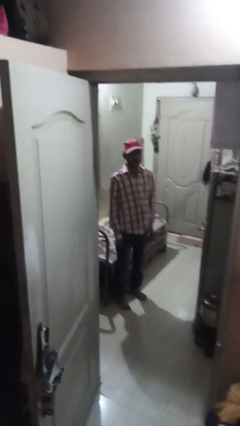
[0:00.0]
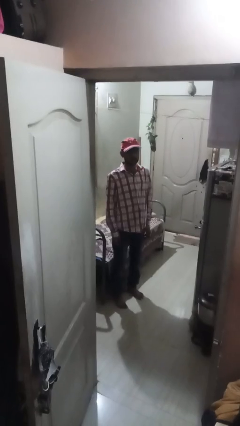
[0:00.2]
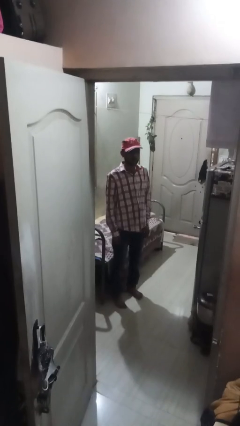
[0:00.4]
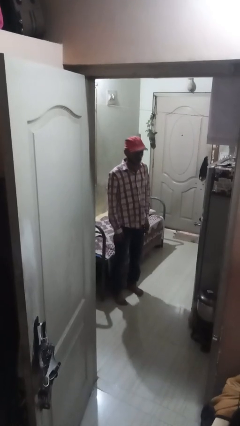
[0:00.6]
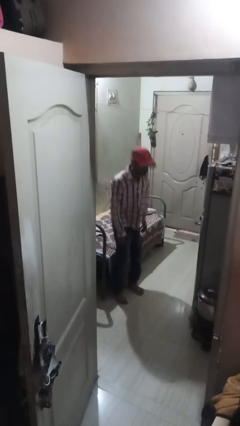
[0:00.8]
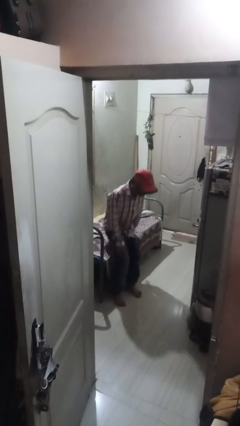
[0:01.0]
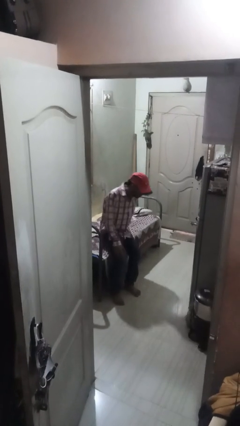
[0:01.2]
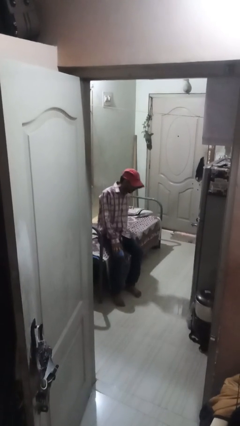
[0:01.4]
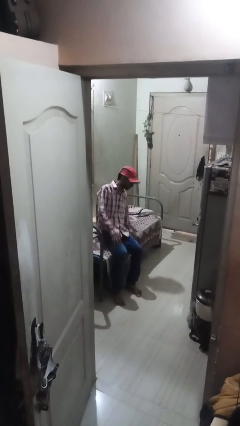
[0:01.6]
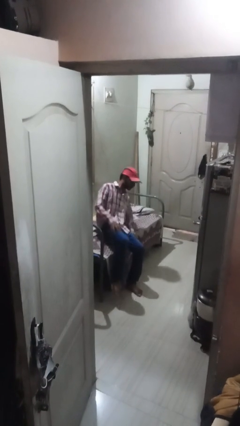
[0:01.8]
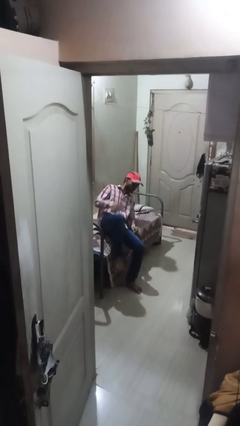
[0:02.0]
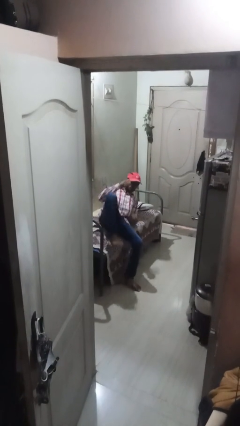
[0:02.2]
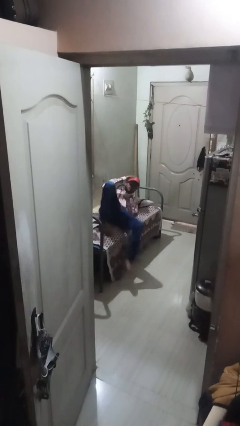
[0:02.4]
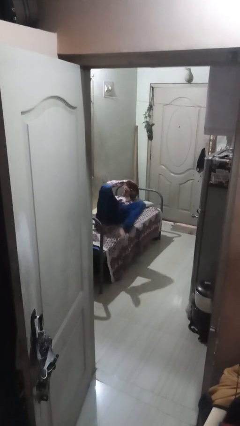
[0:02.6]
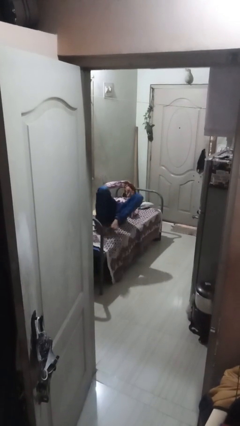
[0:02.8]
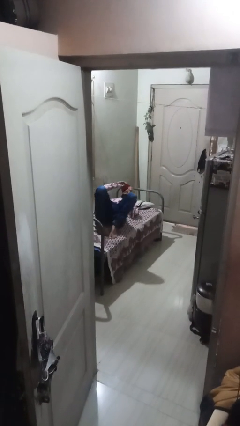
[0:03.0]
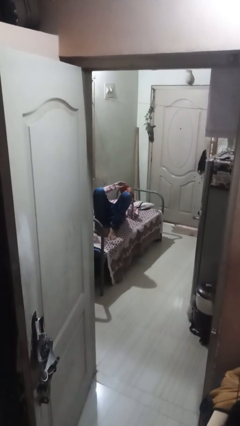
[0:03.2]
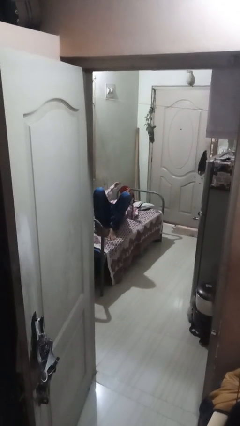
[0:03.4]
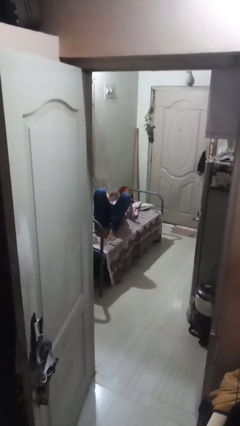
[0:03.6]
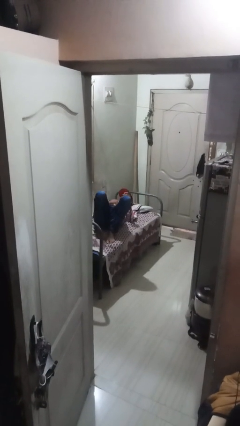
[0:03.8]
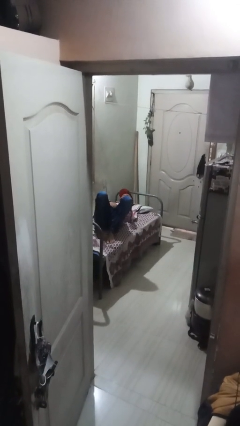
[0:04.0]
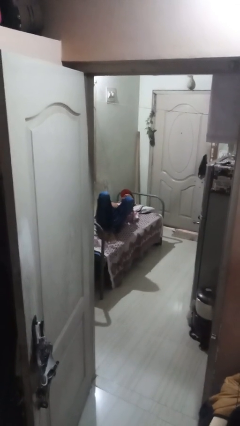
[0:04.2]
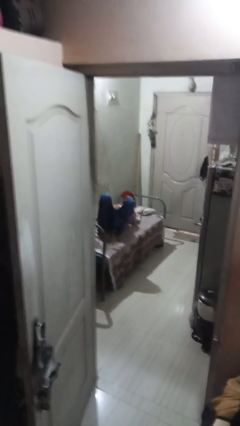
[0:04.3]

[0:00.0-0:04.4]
person lies down on bed

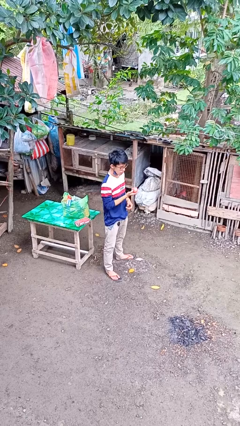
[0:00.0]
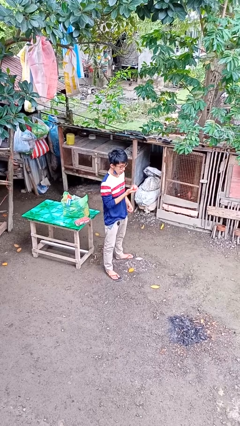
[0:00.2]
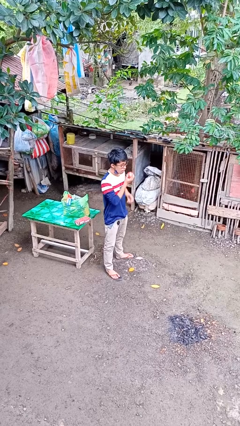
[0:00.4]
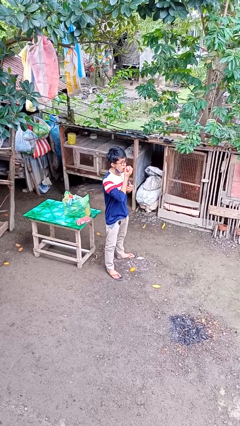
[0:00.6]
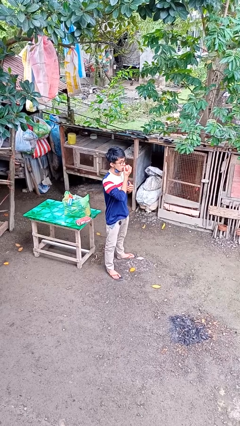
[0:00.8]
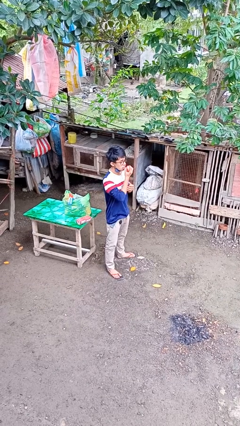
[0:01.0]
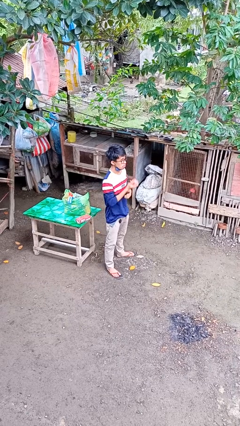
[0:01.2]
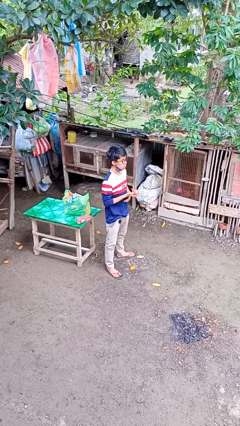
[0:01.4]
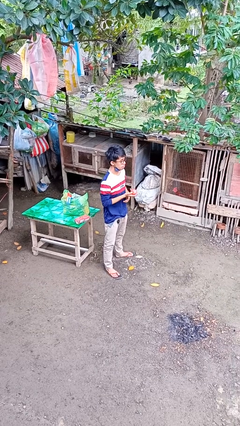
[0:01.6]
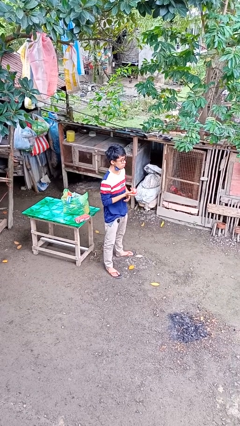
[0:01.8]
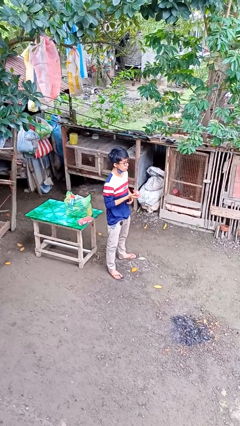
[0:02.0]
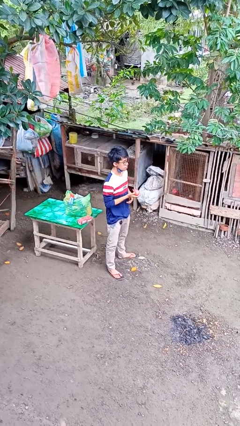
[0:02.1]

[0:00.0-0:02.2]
person eats apple

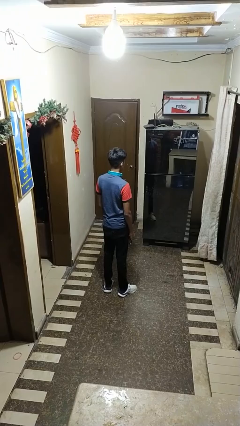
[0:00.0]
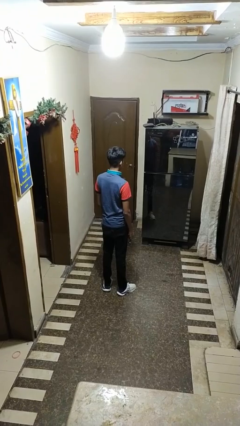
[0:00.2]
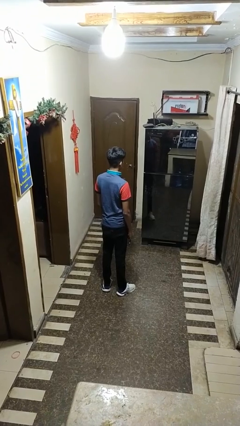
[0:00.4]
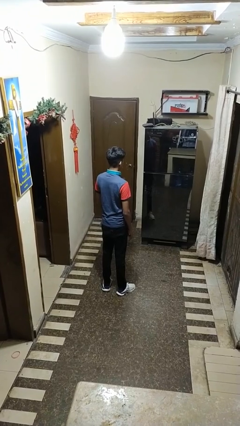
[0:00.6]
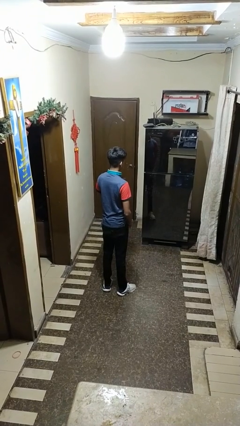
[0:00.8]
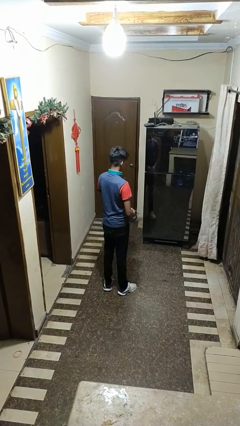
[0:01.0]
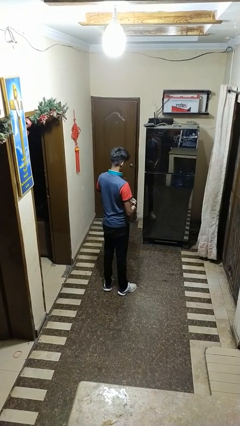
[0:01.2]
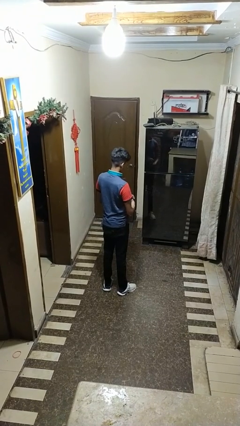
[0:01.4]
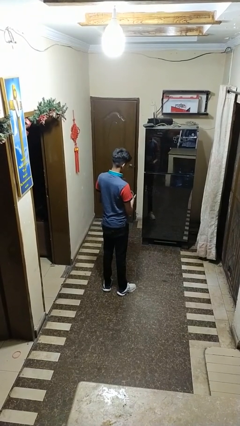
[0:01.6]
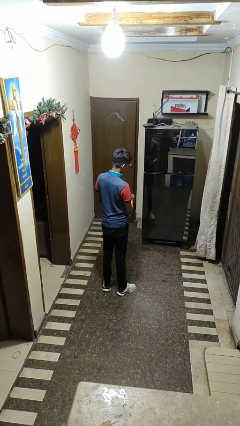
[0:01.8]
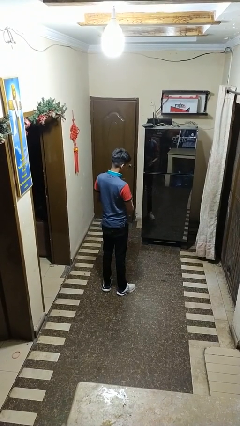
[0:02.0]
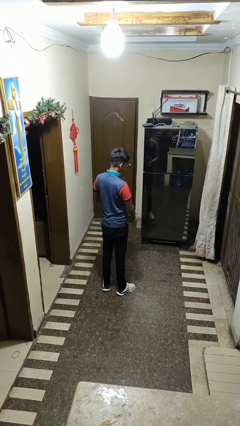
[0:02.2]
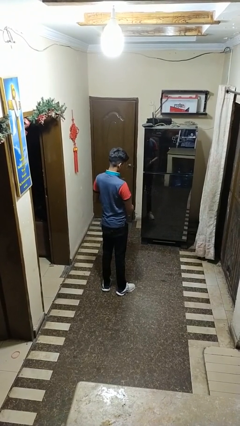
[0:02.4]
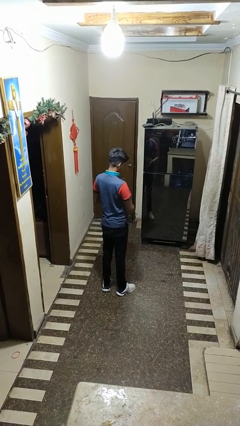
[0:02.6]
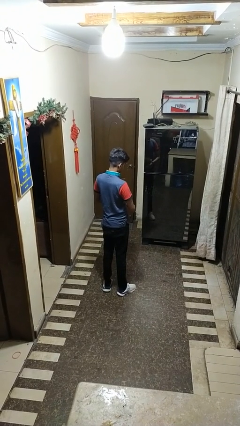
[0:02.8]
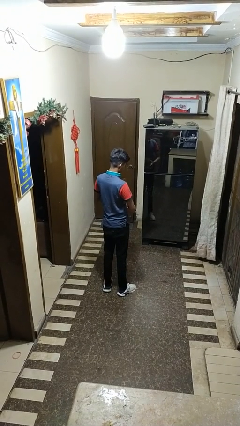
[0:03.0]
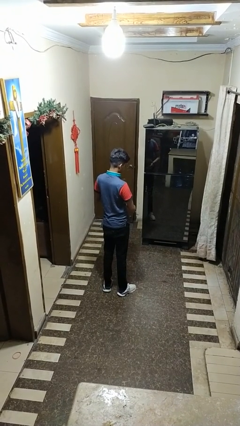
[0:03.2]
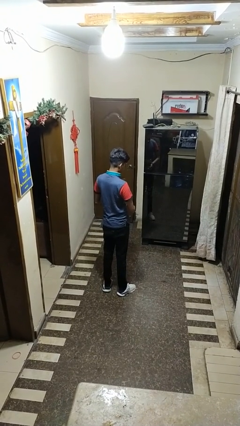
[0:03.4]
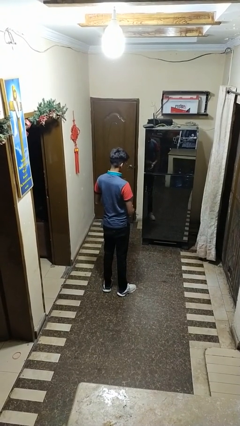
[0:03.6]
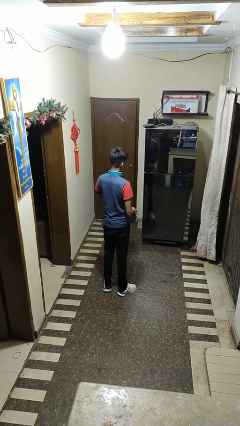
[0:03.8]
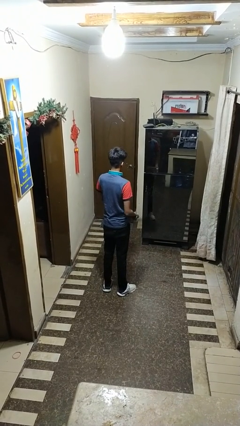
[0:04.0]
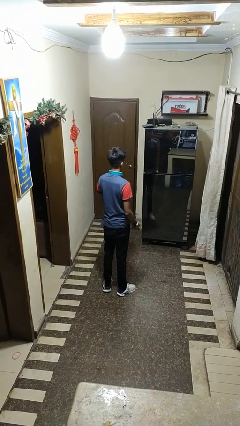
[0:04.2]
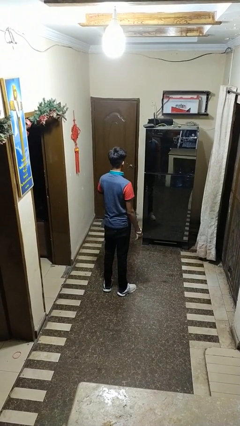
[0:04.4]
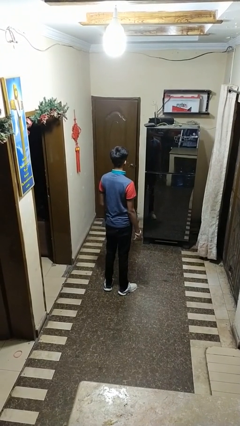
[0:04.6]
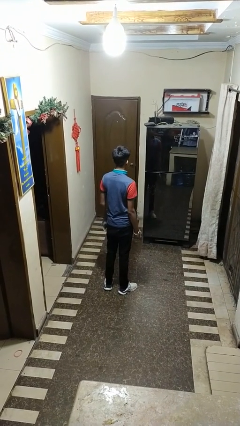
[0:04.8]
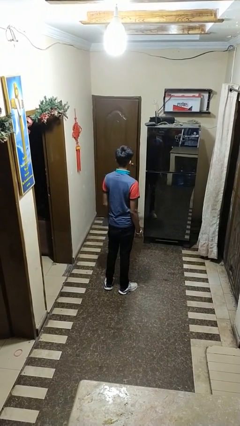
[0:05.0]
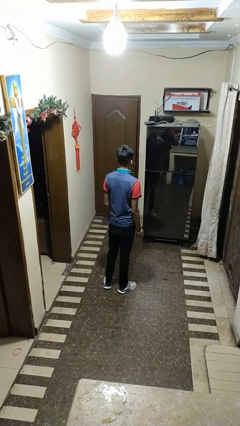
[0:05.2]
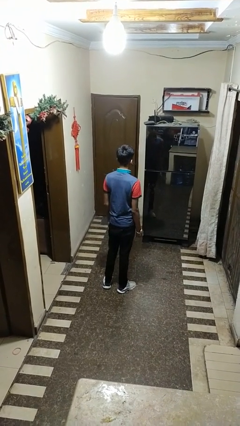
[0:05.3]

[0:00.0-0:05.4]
person puts on wristwatch

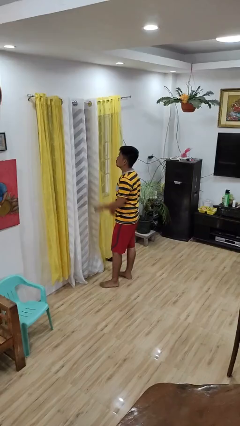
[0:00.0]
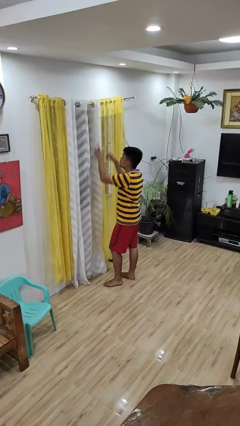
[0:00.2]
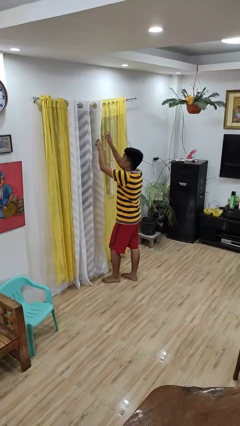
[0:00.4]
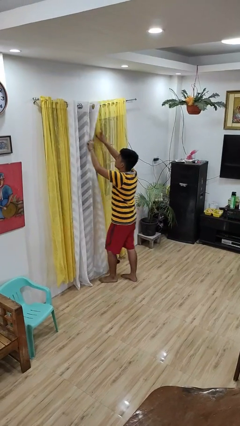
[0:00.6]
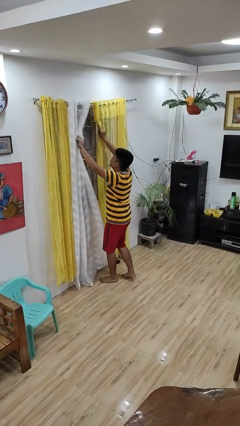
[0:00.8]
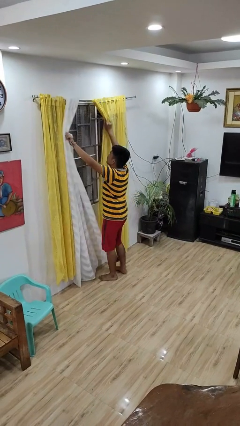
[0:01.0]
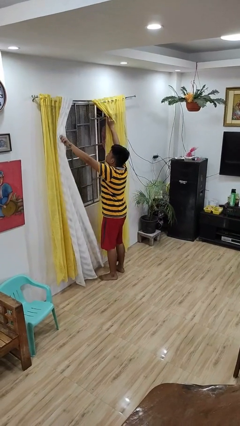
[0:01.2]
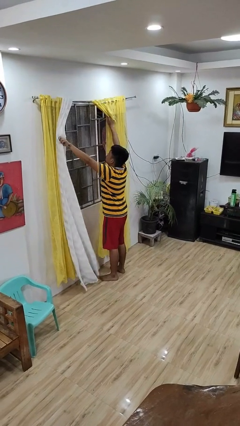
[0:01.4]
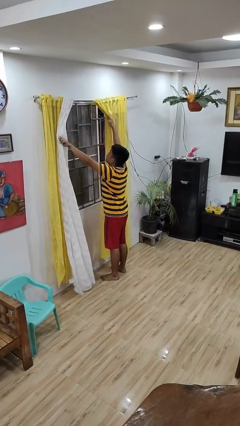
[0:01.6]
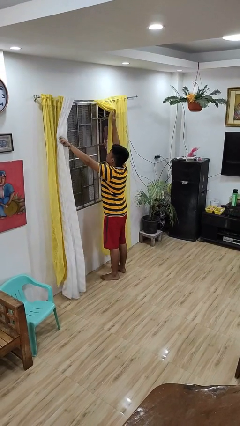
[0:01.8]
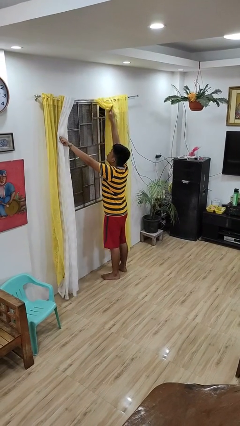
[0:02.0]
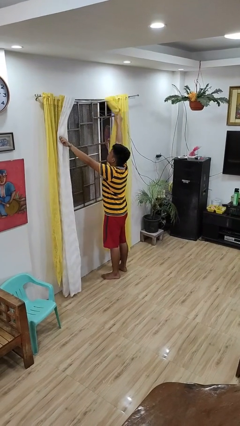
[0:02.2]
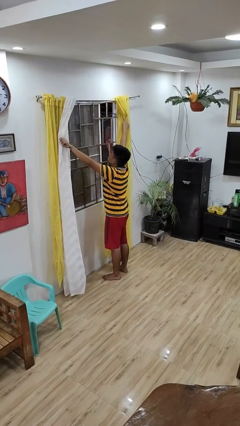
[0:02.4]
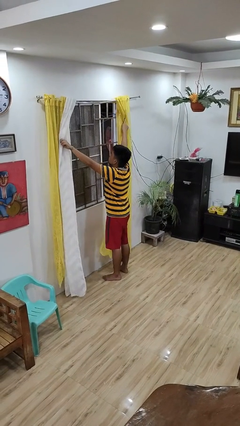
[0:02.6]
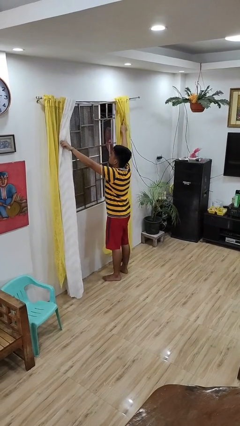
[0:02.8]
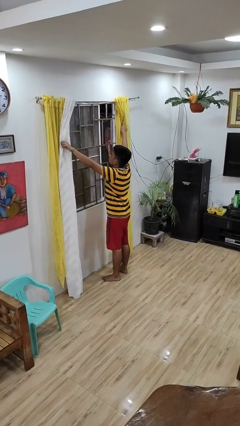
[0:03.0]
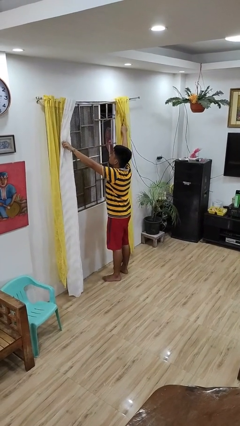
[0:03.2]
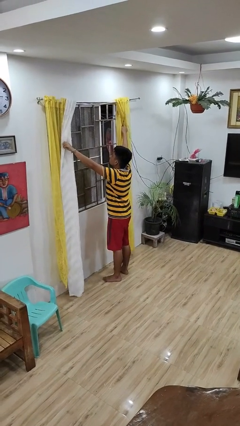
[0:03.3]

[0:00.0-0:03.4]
person opens curtains

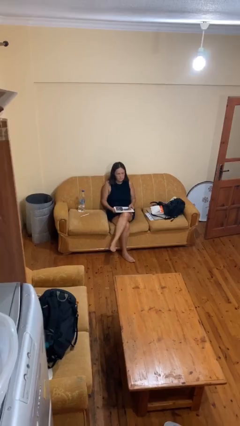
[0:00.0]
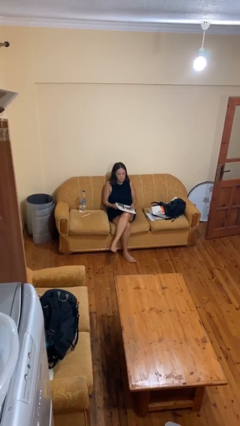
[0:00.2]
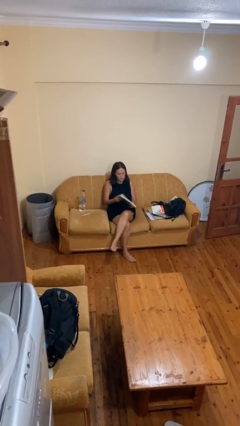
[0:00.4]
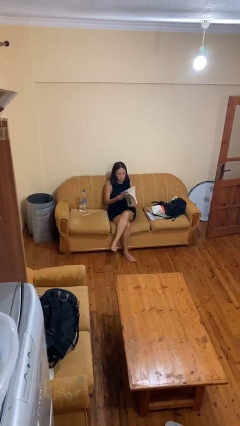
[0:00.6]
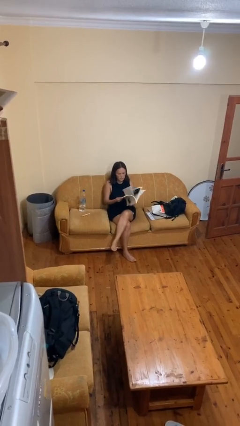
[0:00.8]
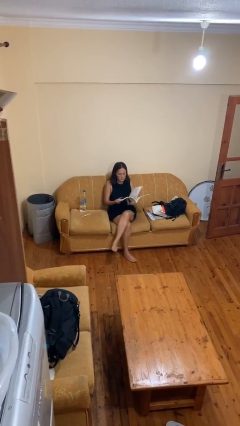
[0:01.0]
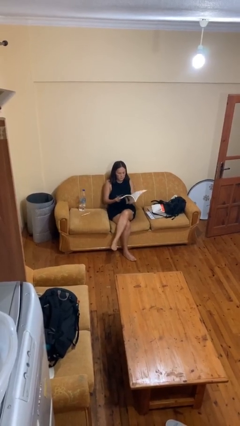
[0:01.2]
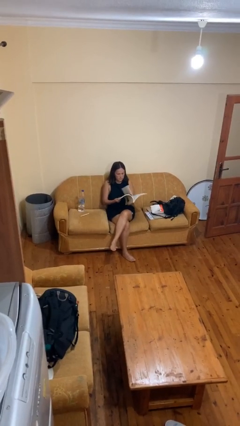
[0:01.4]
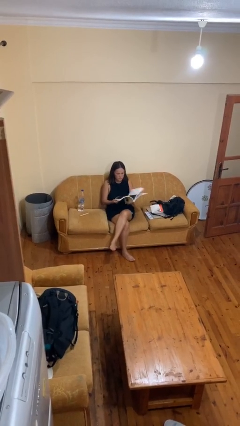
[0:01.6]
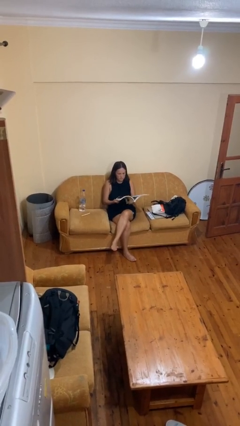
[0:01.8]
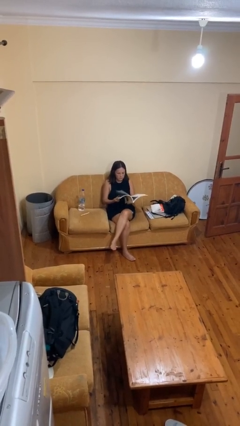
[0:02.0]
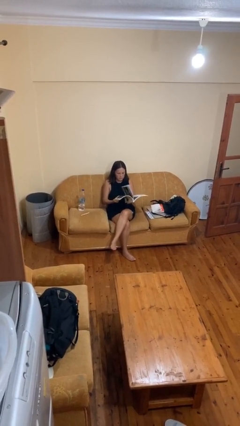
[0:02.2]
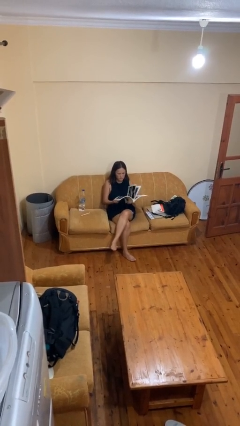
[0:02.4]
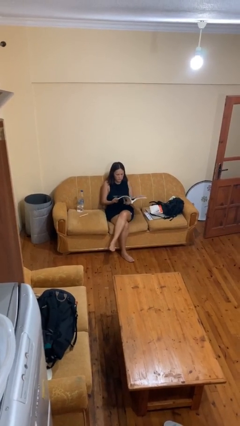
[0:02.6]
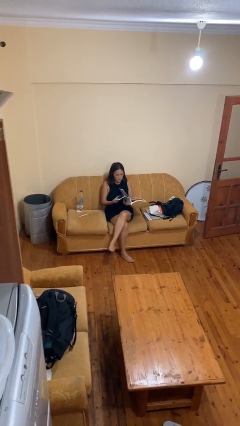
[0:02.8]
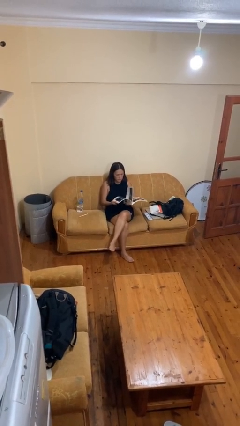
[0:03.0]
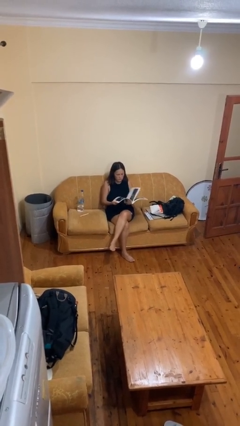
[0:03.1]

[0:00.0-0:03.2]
person reads magazine
